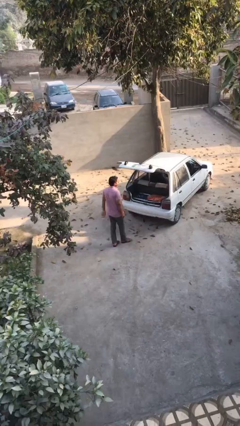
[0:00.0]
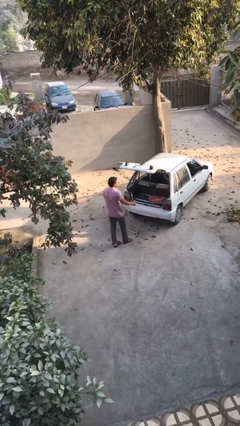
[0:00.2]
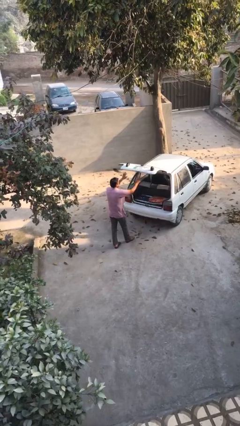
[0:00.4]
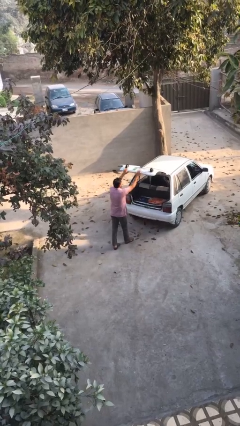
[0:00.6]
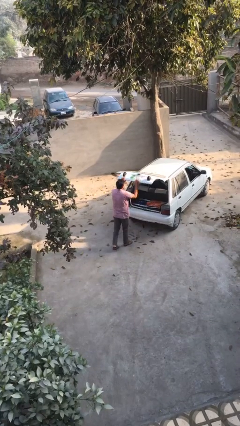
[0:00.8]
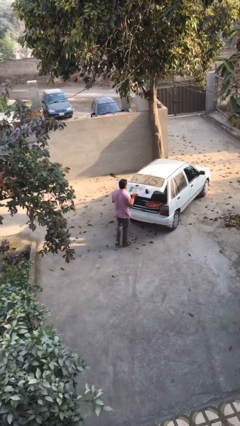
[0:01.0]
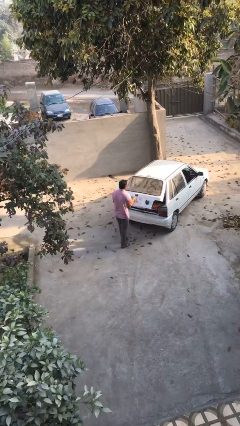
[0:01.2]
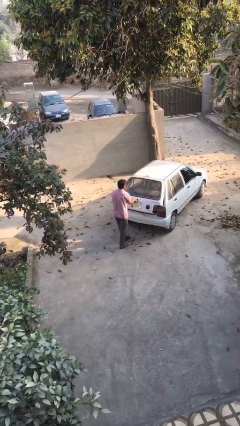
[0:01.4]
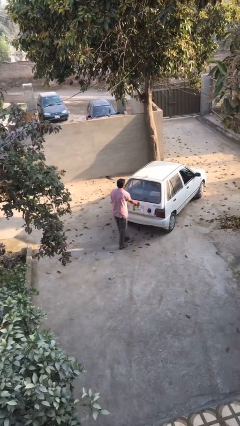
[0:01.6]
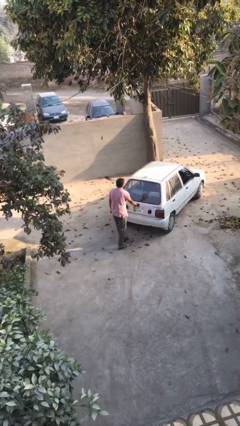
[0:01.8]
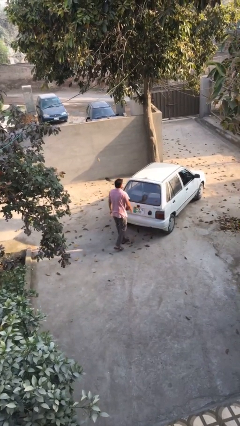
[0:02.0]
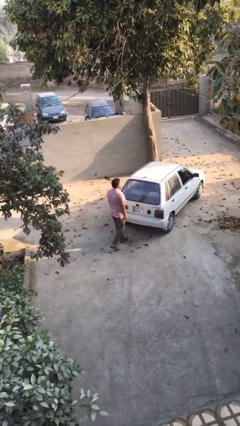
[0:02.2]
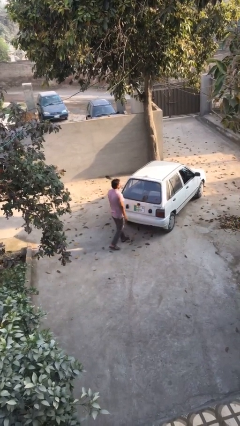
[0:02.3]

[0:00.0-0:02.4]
person closes car trunk

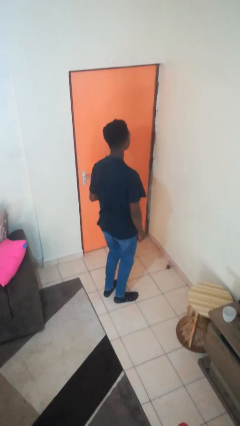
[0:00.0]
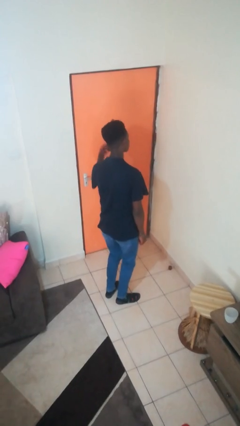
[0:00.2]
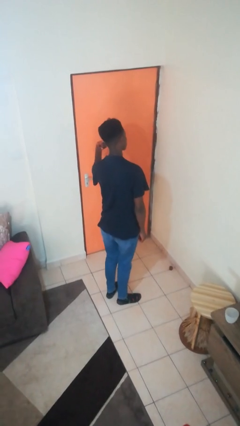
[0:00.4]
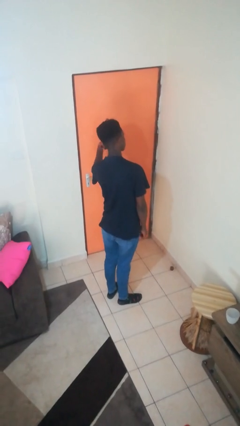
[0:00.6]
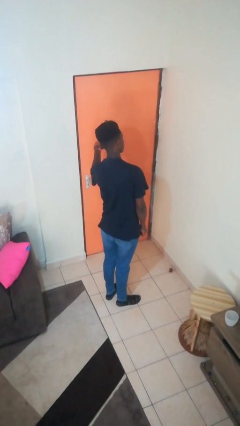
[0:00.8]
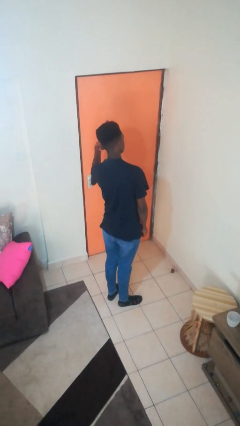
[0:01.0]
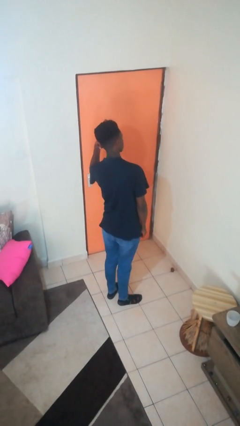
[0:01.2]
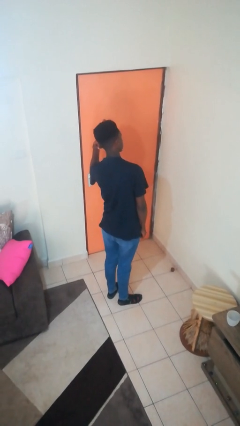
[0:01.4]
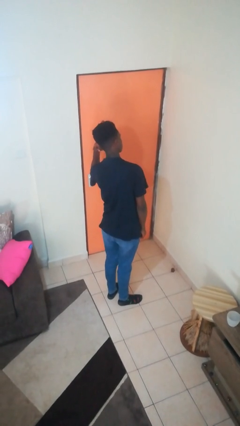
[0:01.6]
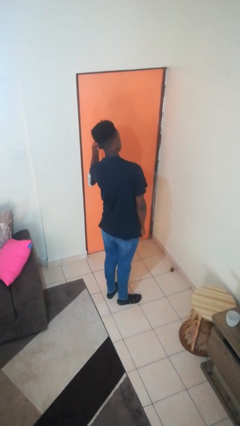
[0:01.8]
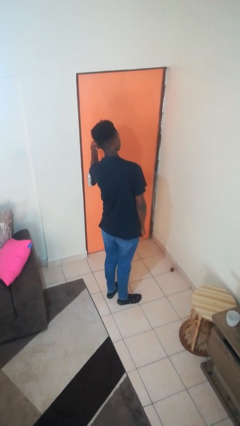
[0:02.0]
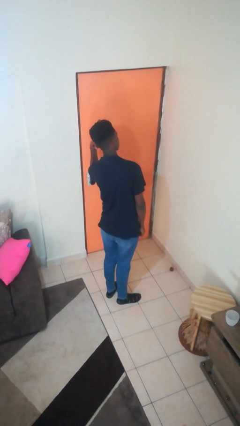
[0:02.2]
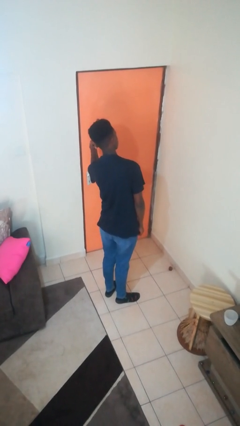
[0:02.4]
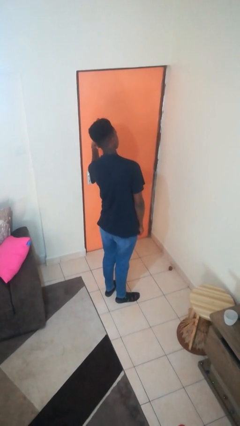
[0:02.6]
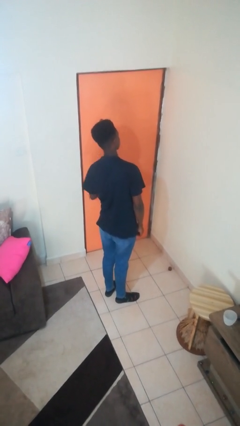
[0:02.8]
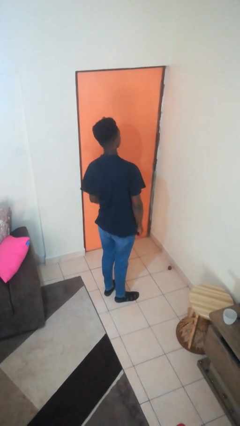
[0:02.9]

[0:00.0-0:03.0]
person gestures listen closely

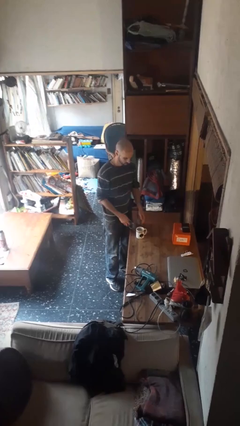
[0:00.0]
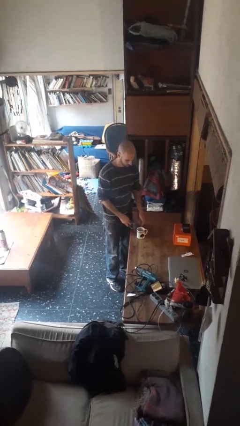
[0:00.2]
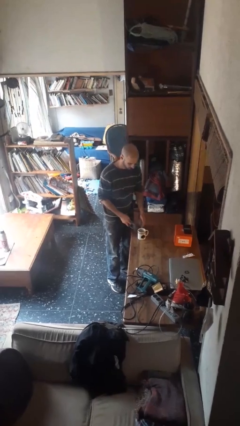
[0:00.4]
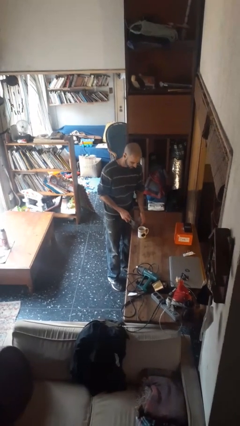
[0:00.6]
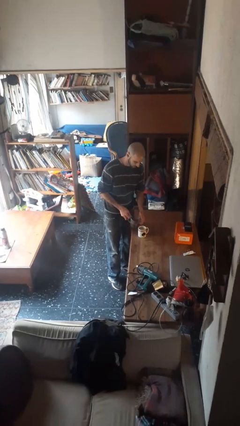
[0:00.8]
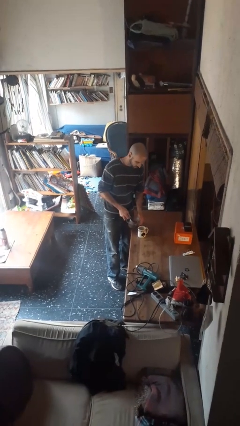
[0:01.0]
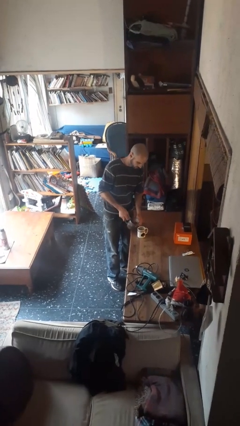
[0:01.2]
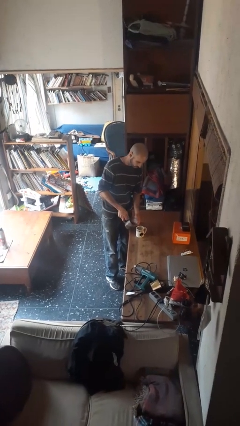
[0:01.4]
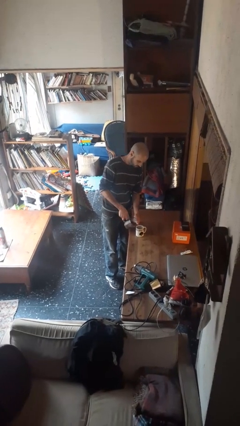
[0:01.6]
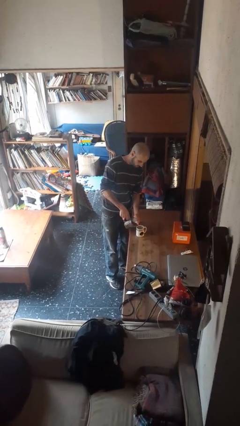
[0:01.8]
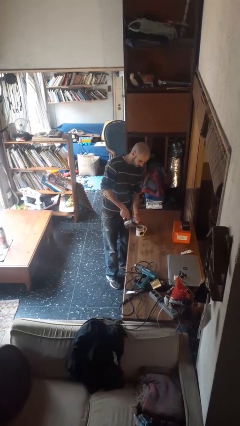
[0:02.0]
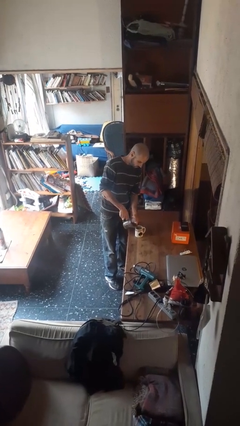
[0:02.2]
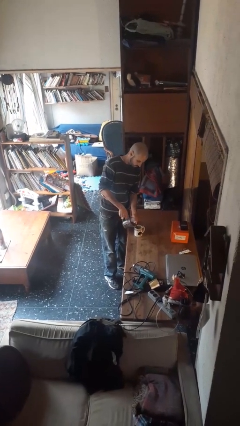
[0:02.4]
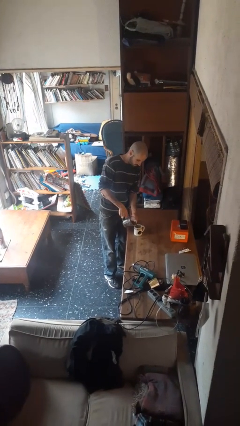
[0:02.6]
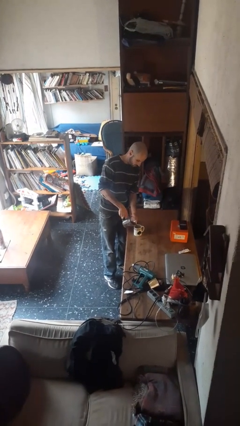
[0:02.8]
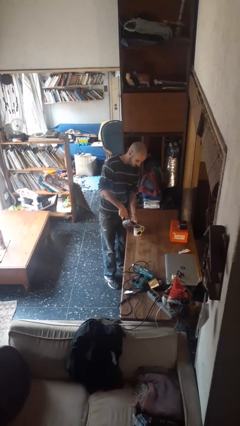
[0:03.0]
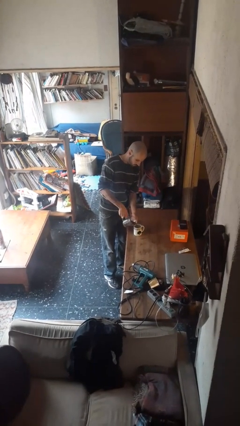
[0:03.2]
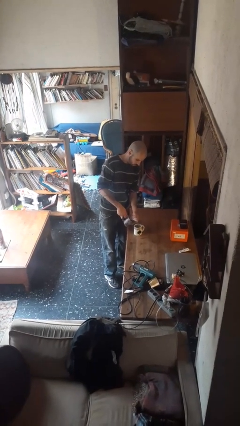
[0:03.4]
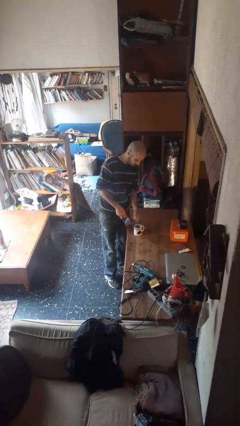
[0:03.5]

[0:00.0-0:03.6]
person pours coffee into mug

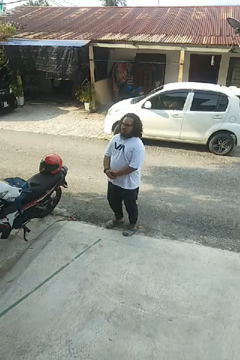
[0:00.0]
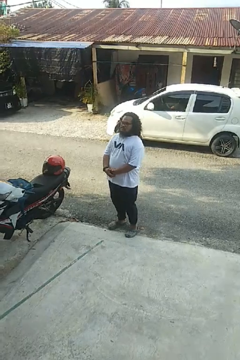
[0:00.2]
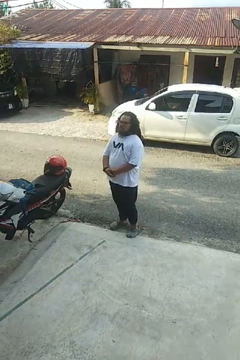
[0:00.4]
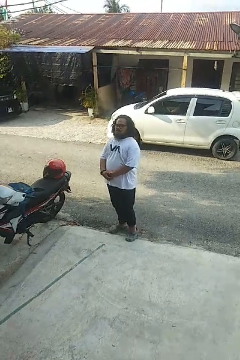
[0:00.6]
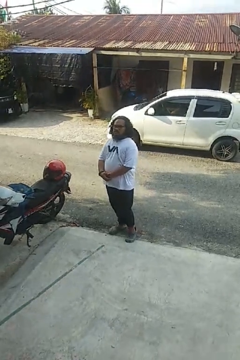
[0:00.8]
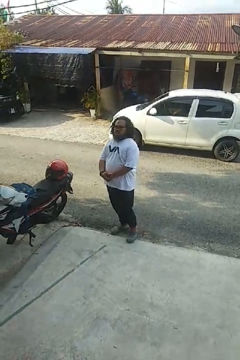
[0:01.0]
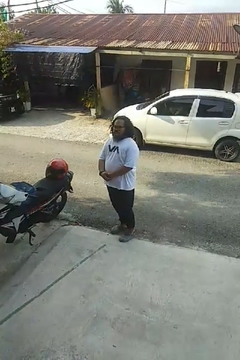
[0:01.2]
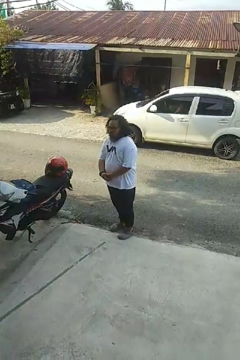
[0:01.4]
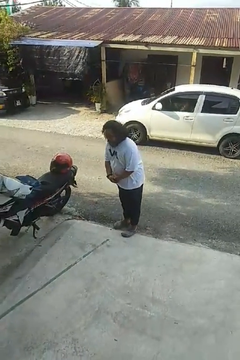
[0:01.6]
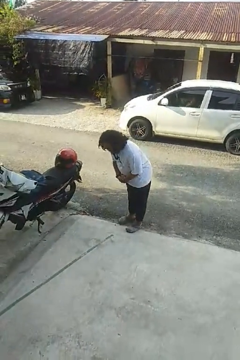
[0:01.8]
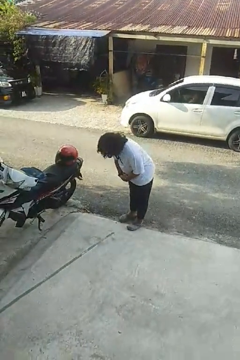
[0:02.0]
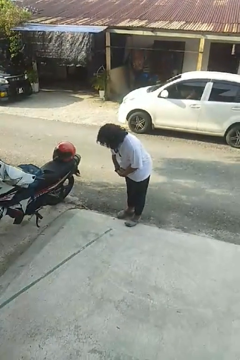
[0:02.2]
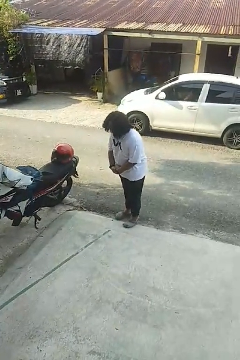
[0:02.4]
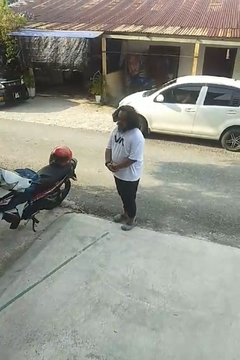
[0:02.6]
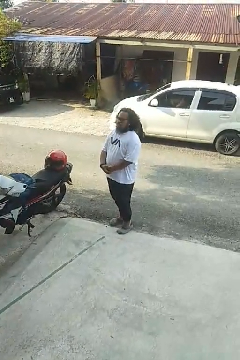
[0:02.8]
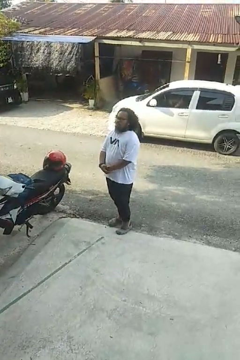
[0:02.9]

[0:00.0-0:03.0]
person bows

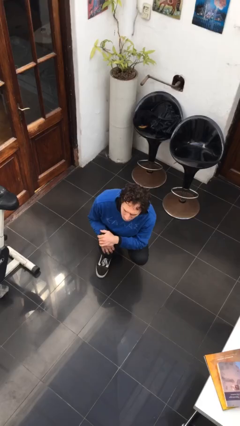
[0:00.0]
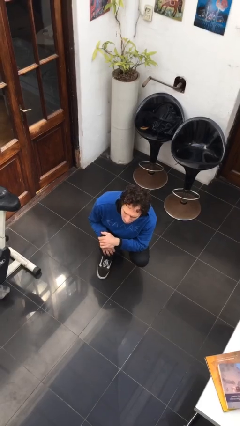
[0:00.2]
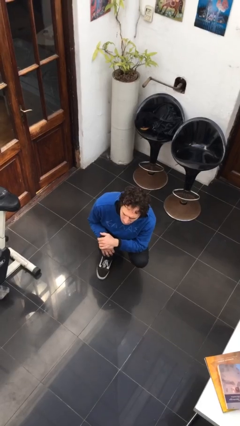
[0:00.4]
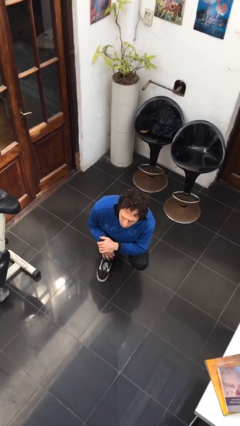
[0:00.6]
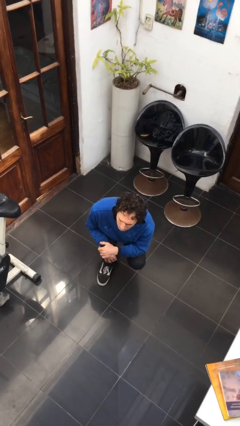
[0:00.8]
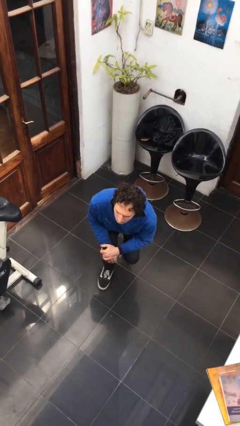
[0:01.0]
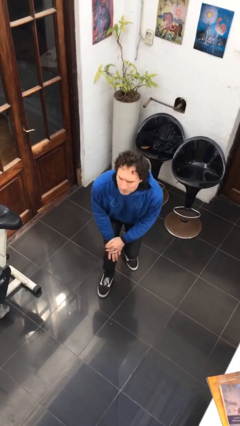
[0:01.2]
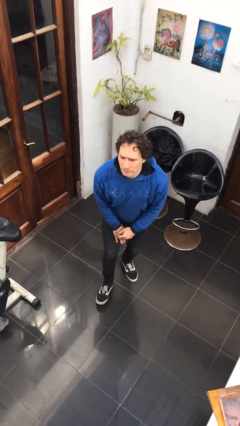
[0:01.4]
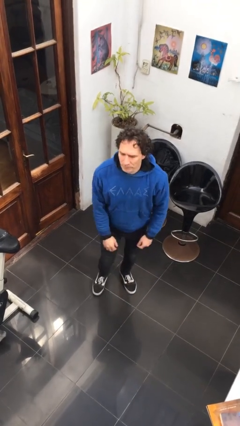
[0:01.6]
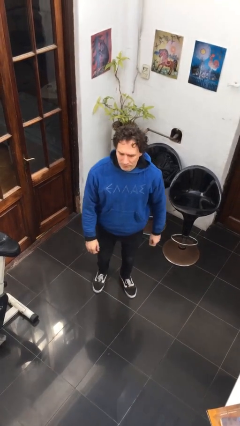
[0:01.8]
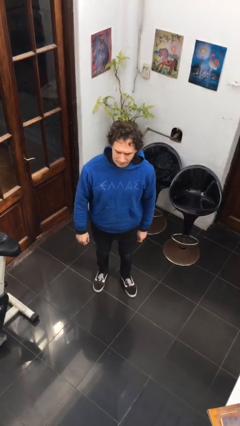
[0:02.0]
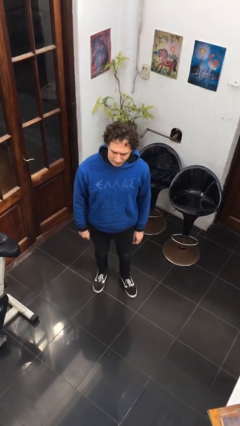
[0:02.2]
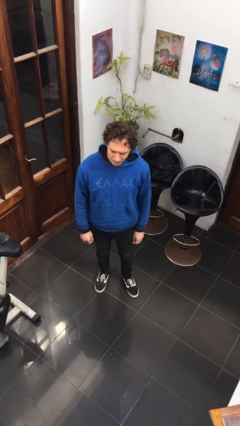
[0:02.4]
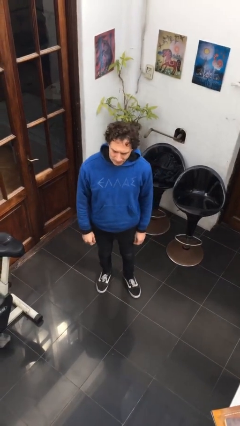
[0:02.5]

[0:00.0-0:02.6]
person stands up

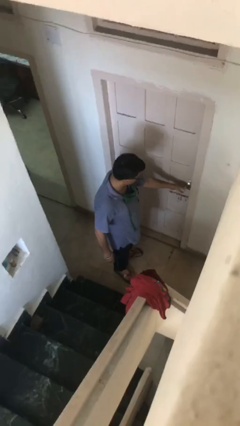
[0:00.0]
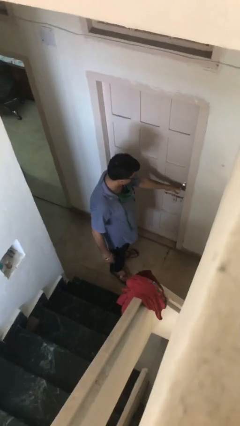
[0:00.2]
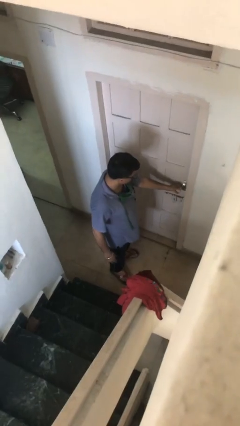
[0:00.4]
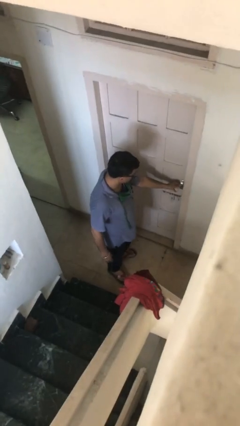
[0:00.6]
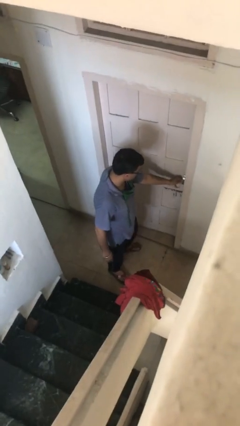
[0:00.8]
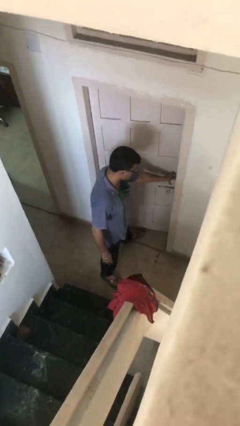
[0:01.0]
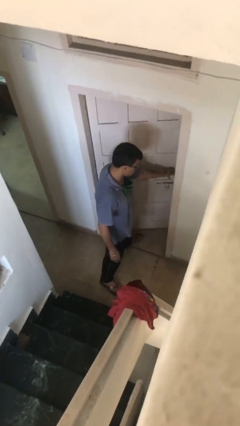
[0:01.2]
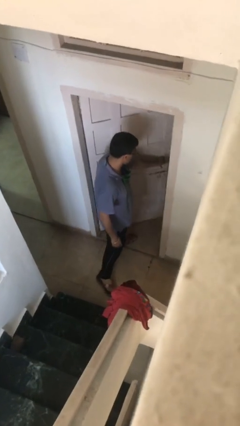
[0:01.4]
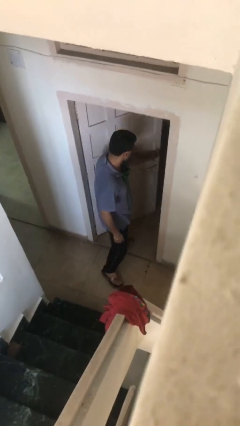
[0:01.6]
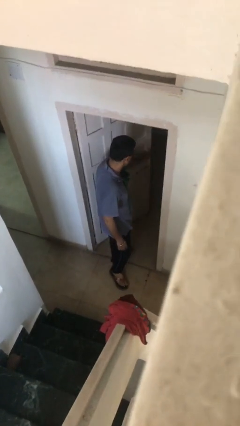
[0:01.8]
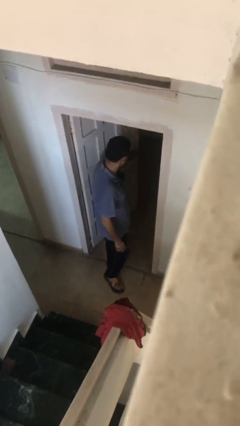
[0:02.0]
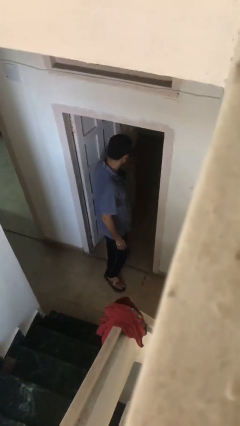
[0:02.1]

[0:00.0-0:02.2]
person opens facility door

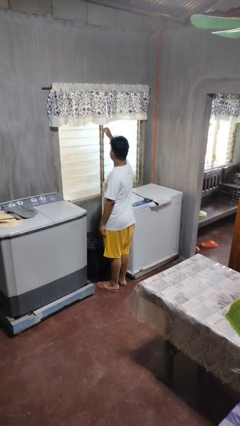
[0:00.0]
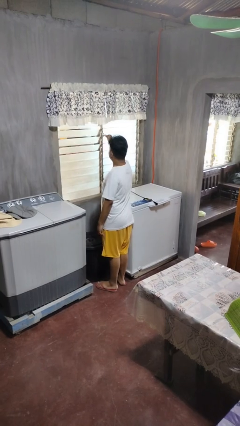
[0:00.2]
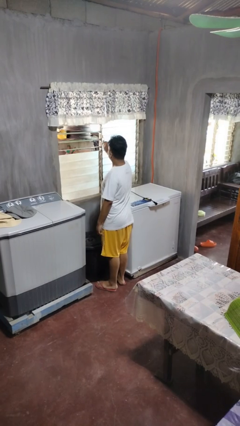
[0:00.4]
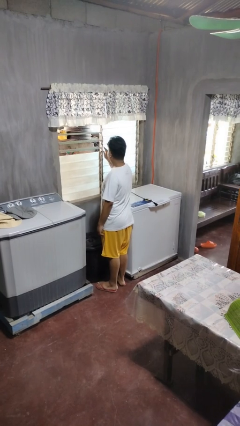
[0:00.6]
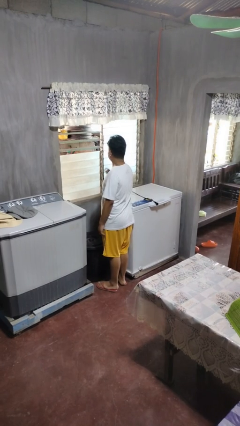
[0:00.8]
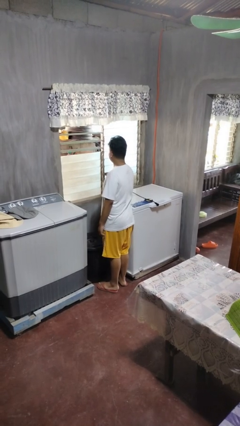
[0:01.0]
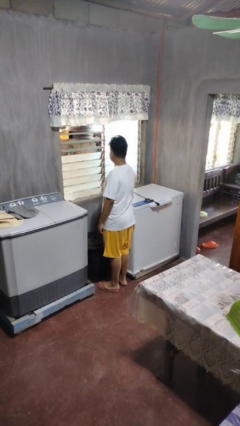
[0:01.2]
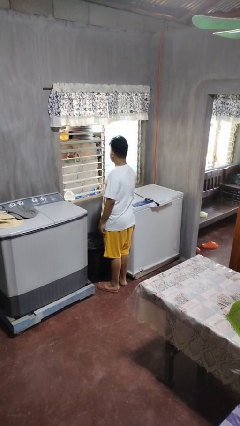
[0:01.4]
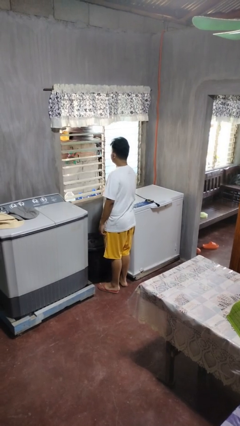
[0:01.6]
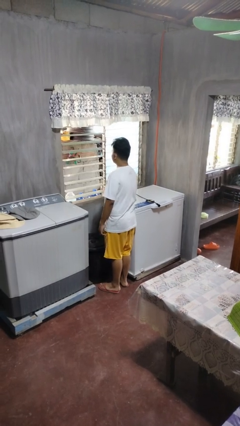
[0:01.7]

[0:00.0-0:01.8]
person opens home window
